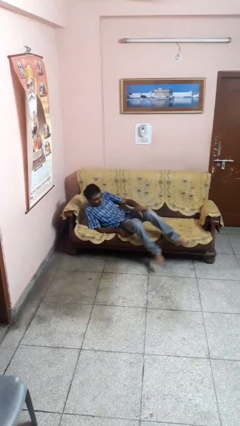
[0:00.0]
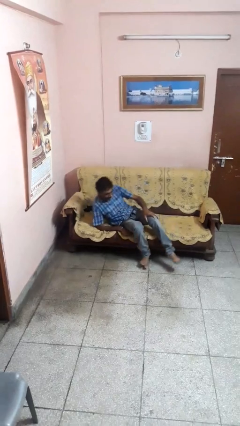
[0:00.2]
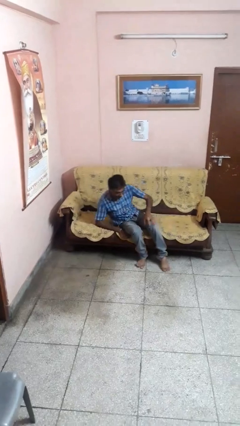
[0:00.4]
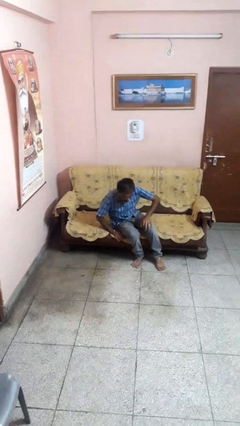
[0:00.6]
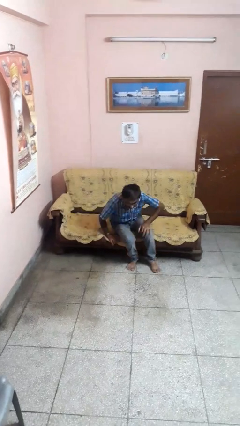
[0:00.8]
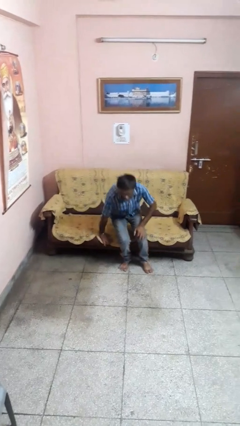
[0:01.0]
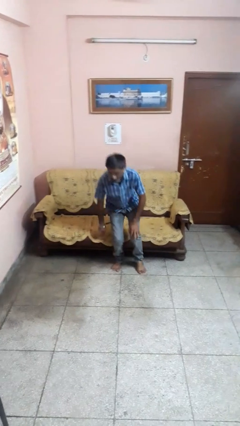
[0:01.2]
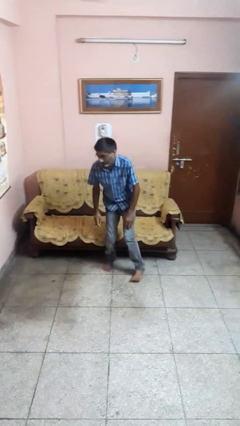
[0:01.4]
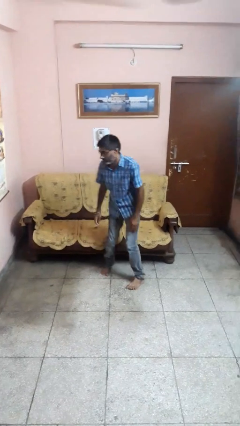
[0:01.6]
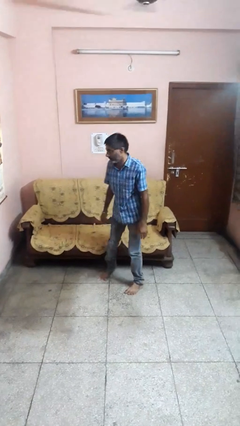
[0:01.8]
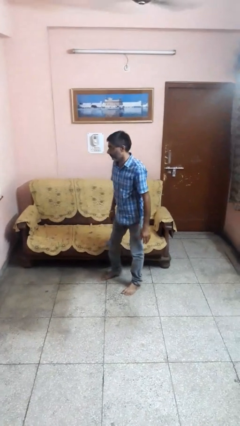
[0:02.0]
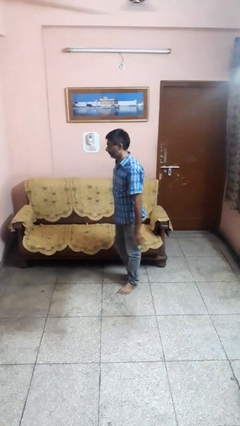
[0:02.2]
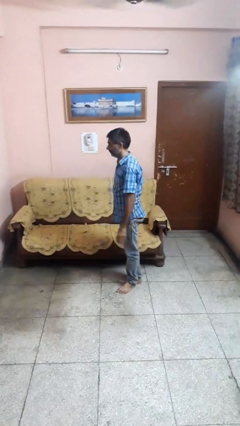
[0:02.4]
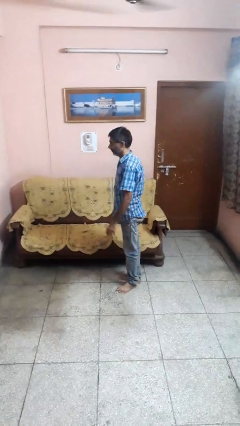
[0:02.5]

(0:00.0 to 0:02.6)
person stands up

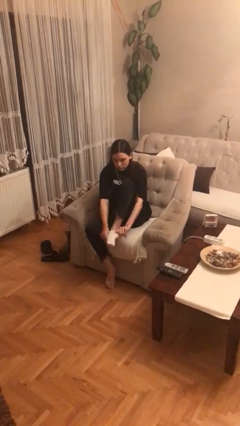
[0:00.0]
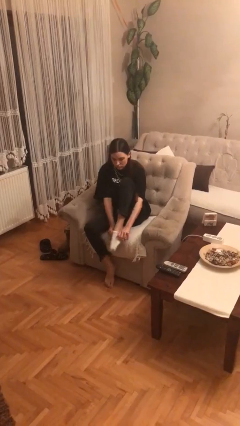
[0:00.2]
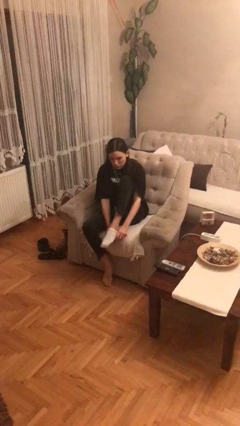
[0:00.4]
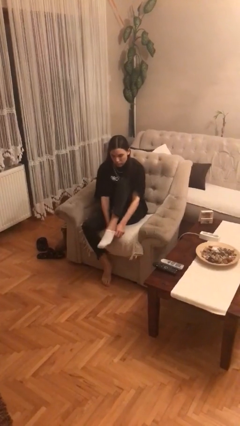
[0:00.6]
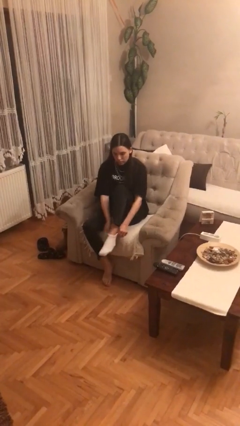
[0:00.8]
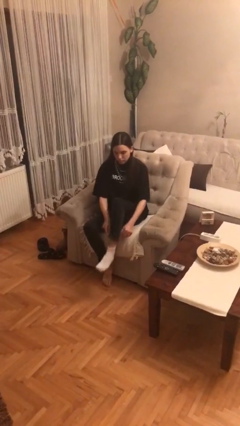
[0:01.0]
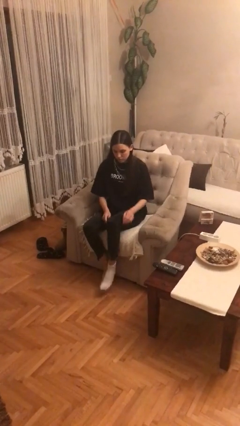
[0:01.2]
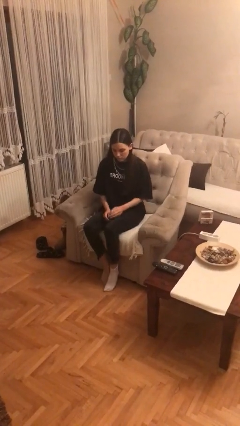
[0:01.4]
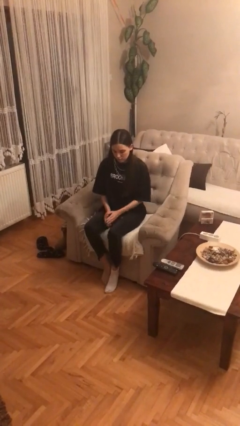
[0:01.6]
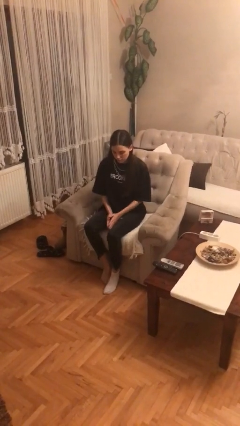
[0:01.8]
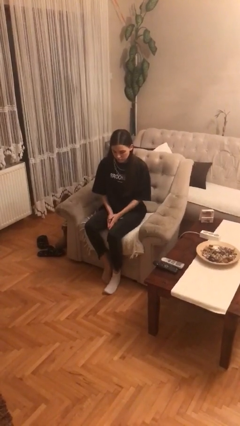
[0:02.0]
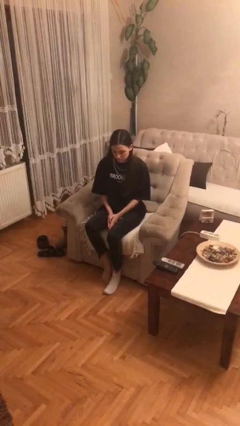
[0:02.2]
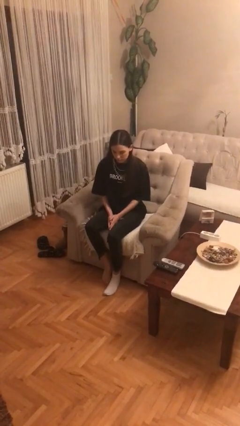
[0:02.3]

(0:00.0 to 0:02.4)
person puts on socks

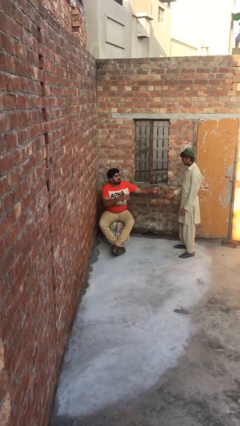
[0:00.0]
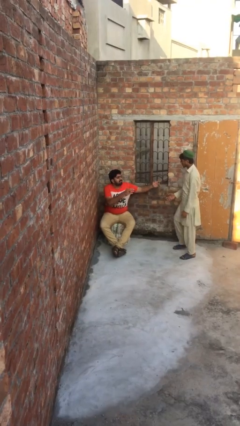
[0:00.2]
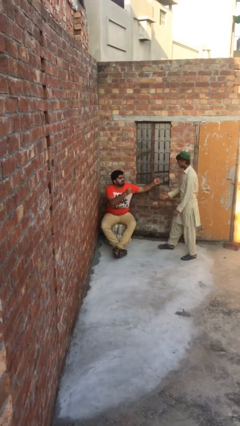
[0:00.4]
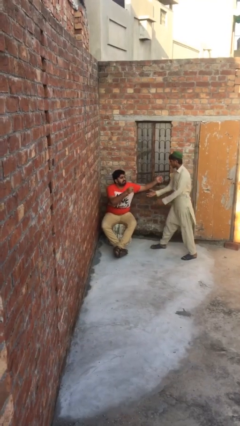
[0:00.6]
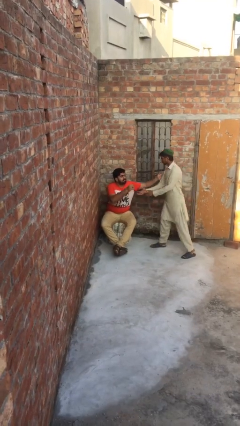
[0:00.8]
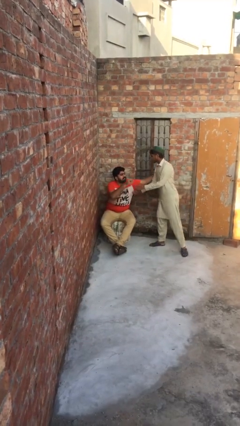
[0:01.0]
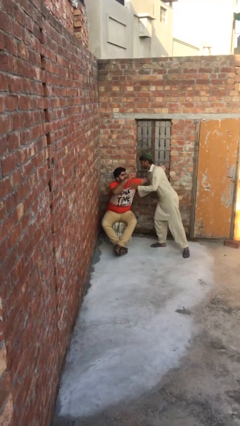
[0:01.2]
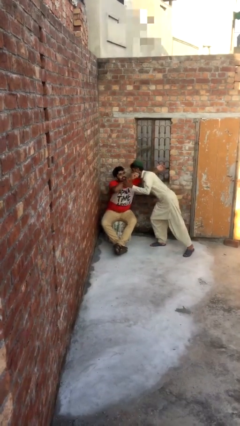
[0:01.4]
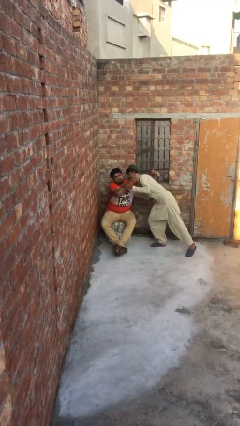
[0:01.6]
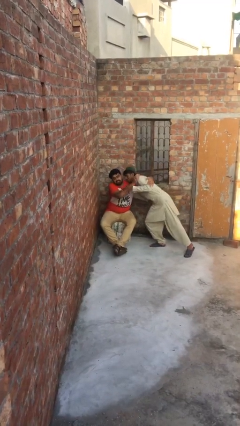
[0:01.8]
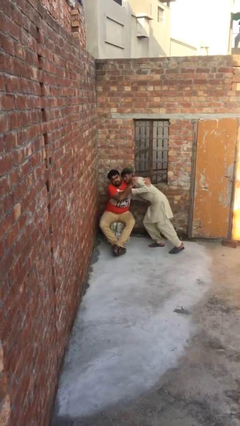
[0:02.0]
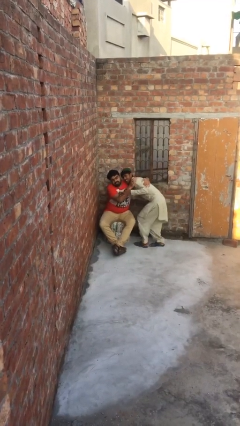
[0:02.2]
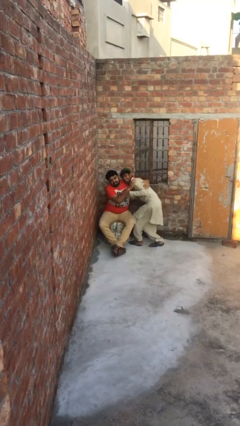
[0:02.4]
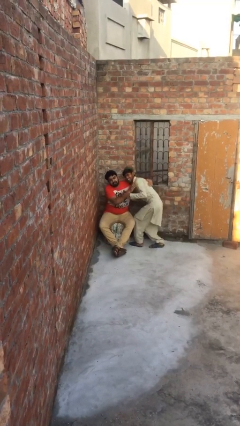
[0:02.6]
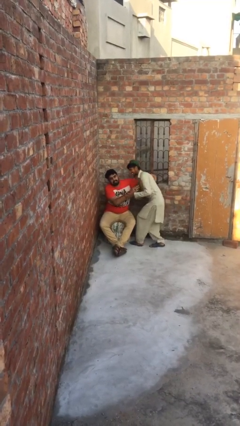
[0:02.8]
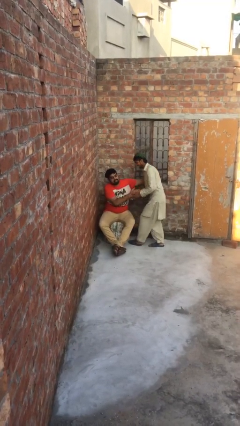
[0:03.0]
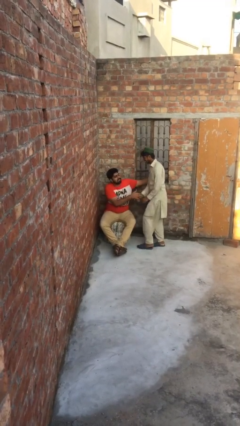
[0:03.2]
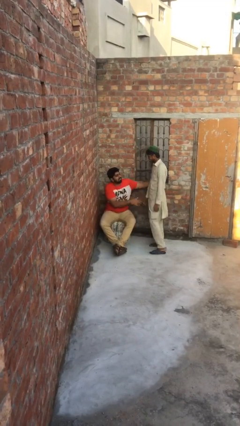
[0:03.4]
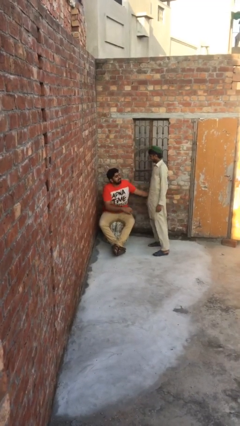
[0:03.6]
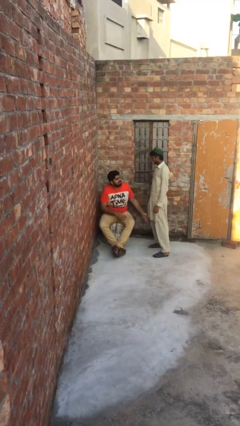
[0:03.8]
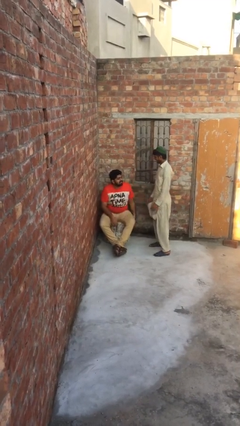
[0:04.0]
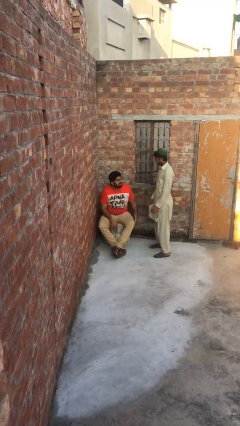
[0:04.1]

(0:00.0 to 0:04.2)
person embraces person

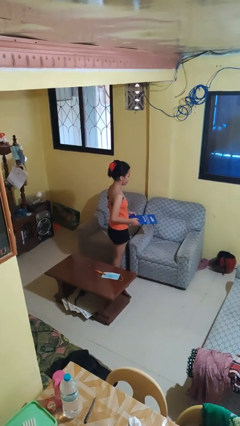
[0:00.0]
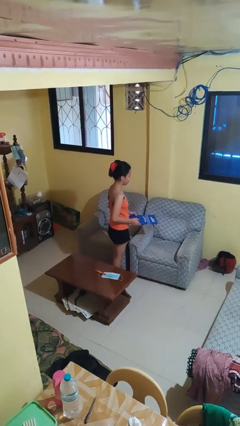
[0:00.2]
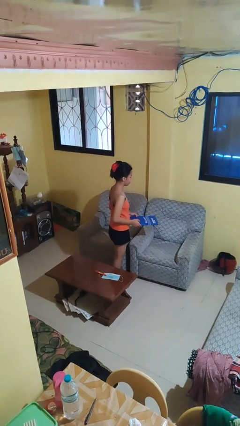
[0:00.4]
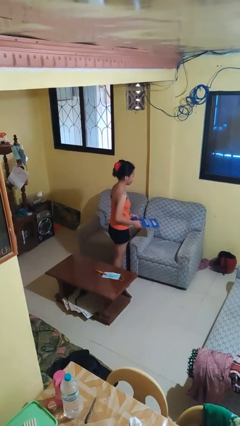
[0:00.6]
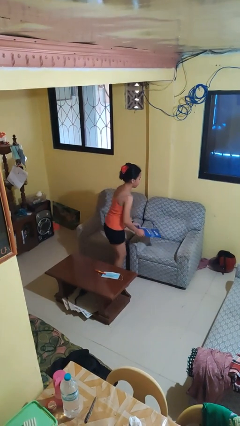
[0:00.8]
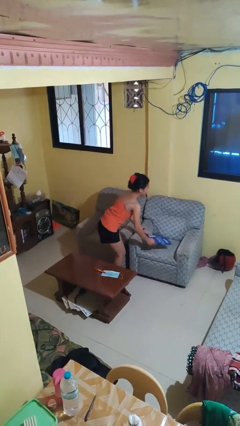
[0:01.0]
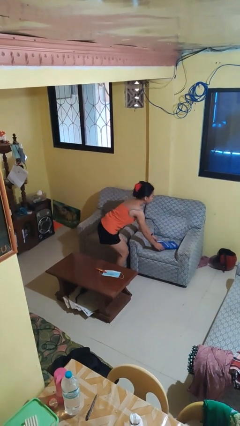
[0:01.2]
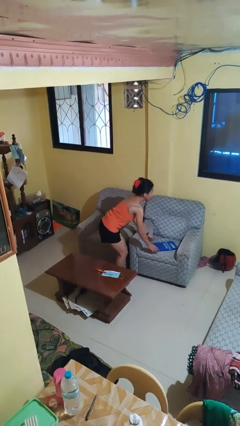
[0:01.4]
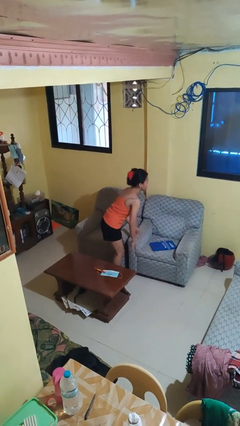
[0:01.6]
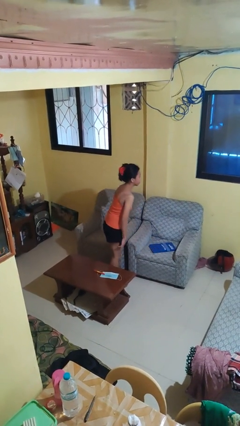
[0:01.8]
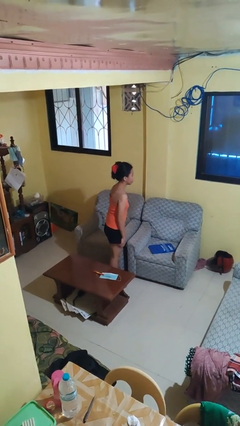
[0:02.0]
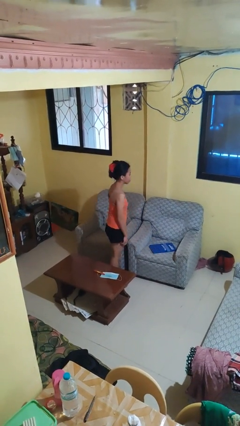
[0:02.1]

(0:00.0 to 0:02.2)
person puts down object on couch

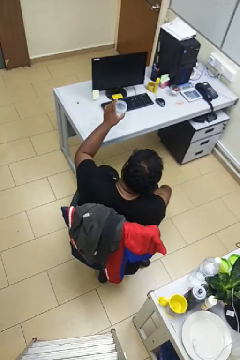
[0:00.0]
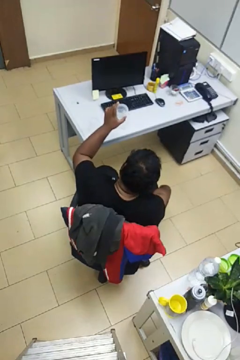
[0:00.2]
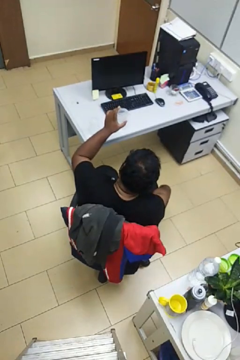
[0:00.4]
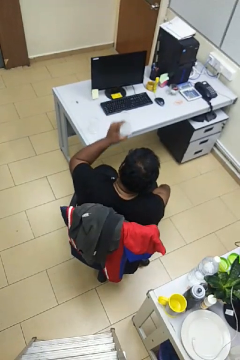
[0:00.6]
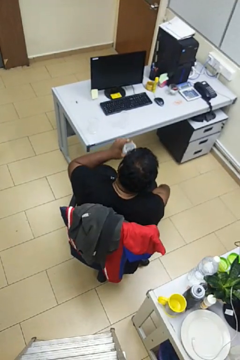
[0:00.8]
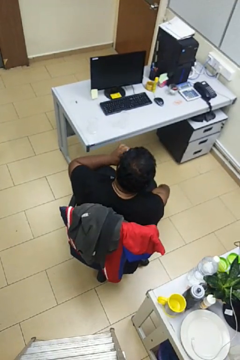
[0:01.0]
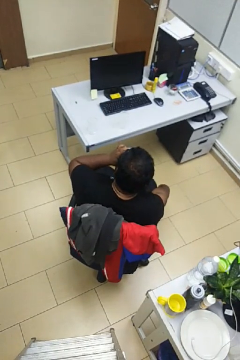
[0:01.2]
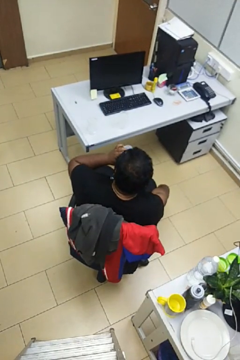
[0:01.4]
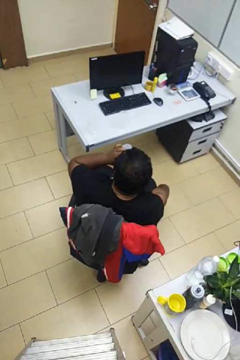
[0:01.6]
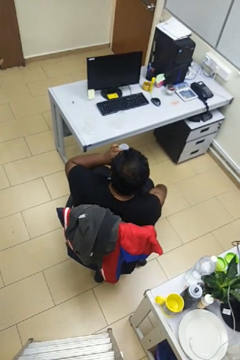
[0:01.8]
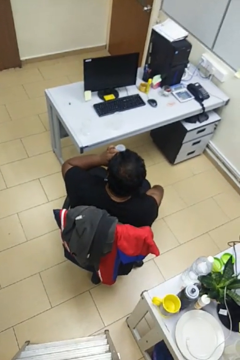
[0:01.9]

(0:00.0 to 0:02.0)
person drinks from shotglass

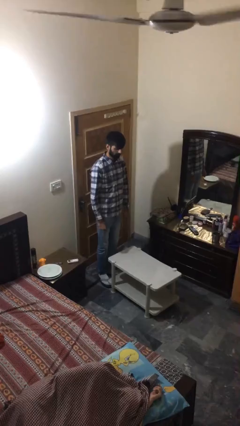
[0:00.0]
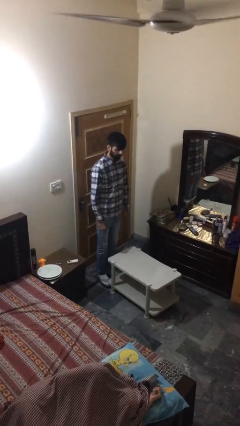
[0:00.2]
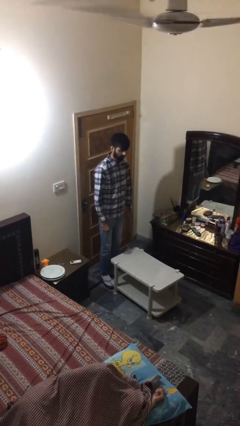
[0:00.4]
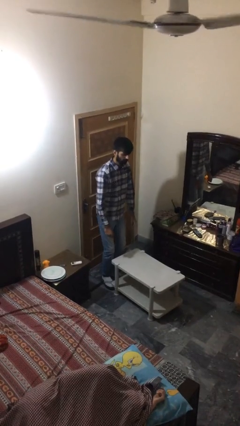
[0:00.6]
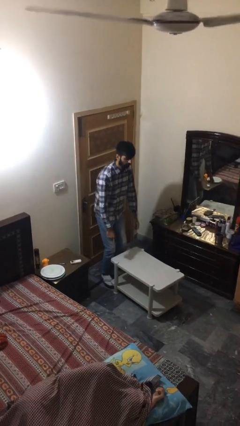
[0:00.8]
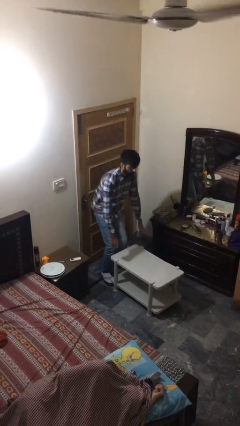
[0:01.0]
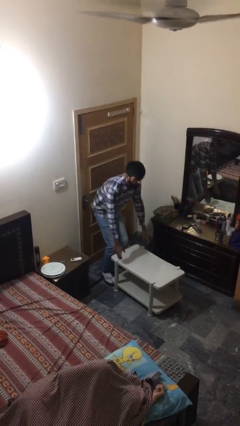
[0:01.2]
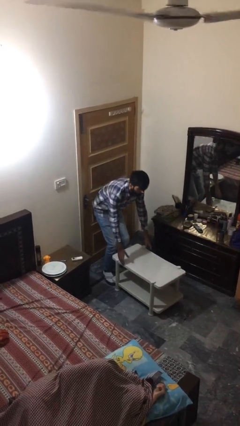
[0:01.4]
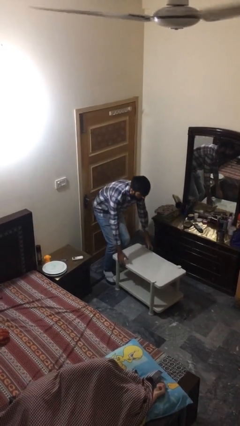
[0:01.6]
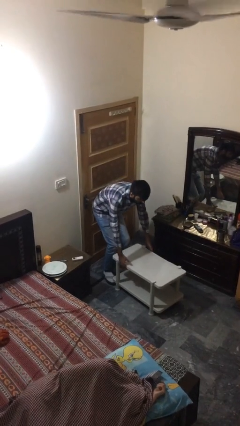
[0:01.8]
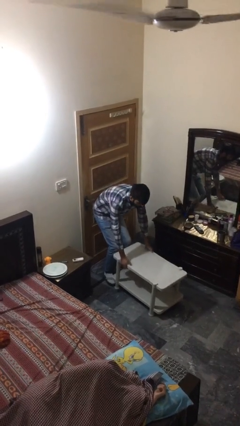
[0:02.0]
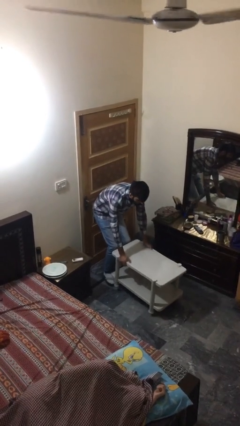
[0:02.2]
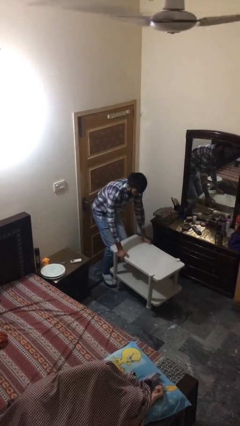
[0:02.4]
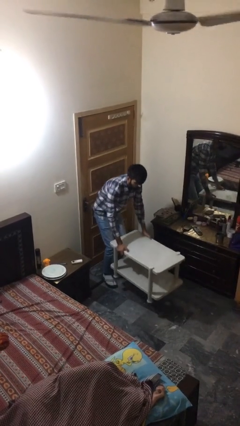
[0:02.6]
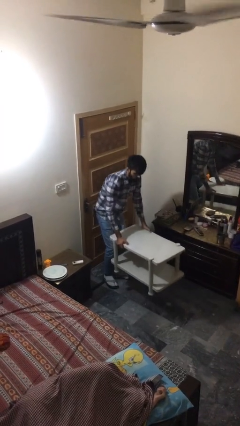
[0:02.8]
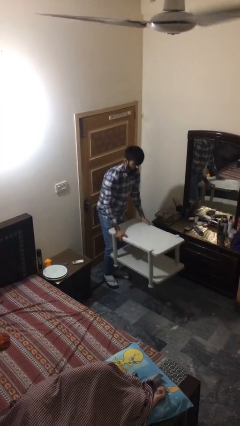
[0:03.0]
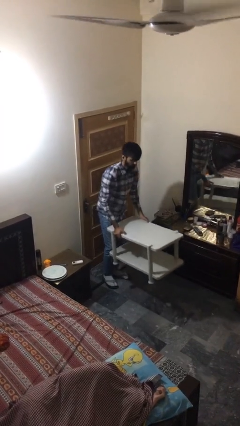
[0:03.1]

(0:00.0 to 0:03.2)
person picks up object from floor

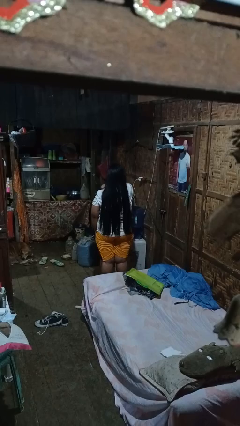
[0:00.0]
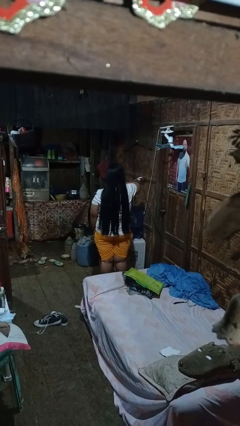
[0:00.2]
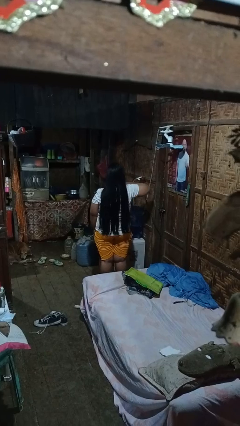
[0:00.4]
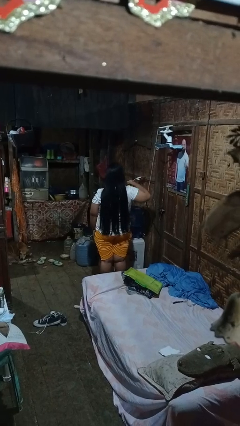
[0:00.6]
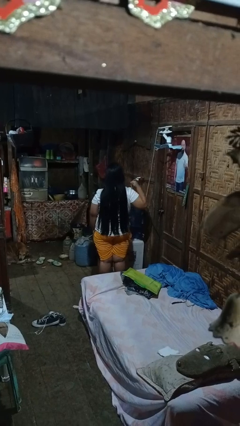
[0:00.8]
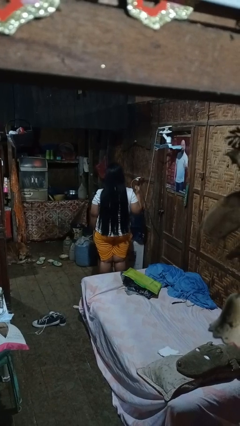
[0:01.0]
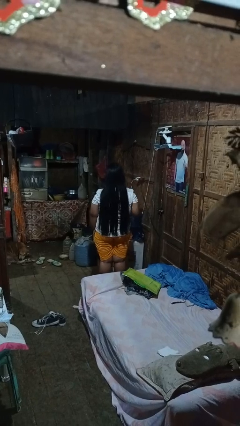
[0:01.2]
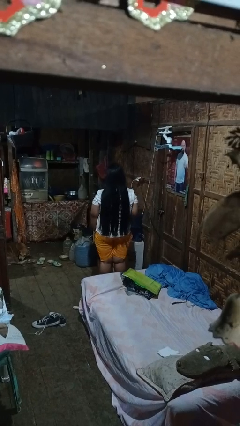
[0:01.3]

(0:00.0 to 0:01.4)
person gestures cut
